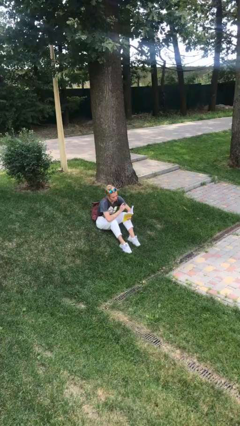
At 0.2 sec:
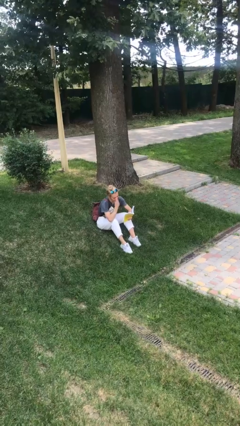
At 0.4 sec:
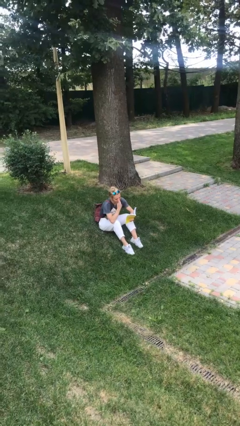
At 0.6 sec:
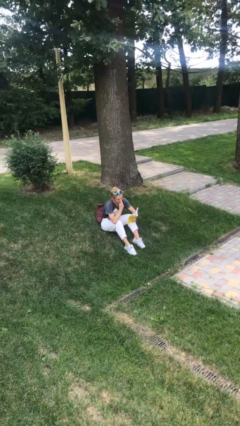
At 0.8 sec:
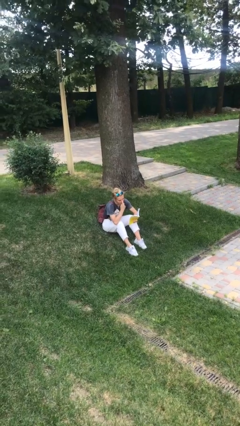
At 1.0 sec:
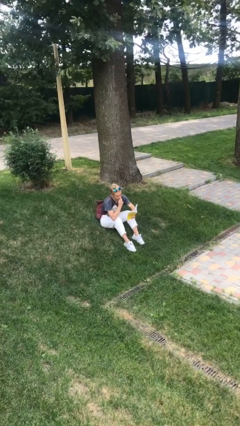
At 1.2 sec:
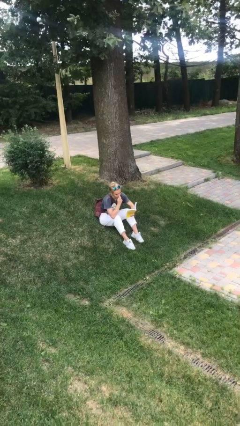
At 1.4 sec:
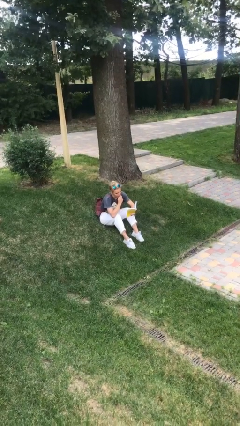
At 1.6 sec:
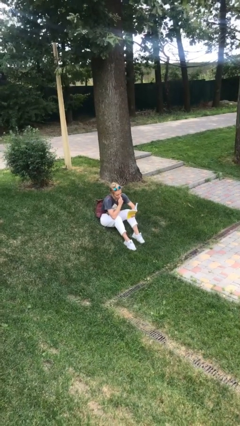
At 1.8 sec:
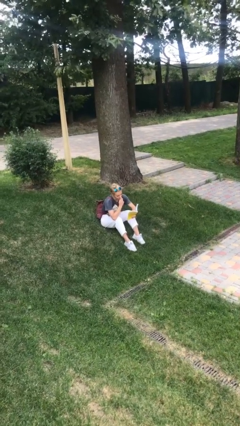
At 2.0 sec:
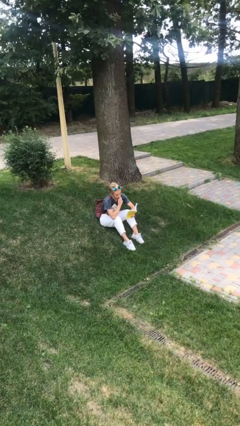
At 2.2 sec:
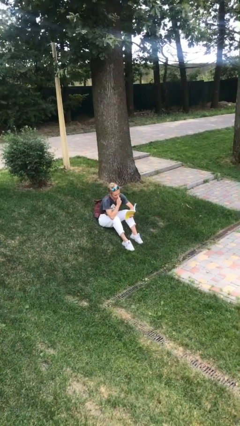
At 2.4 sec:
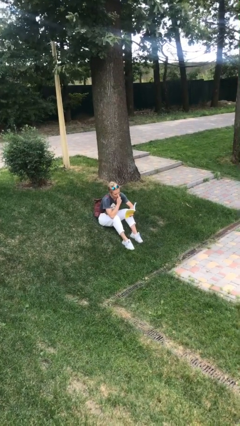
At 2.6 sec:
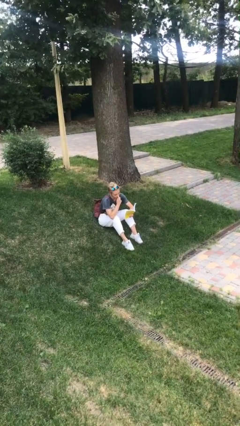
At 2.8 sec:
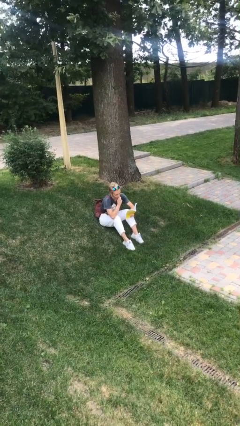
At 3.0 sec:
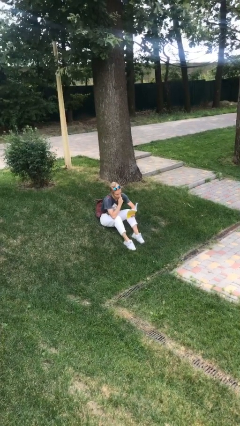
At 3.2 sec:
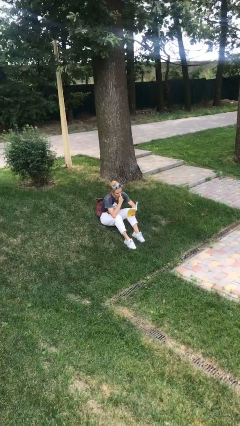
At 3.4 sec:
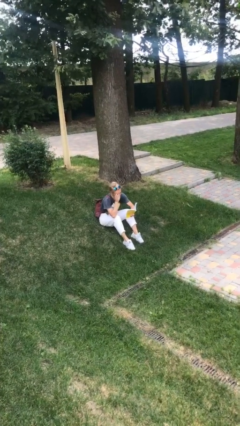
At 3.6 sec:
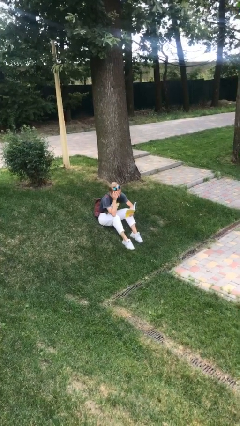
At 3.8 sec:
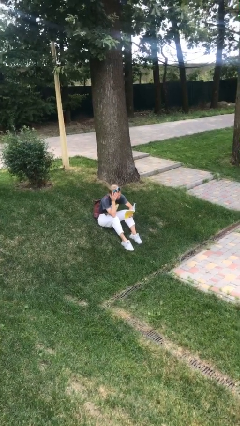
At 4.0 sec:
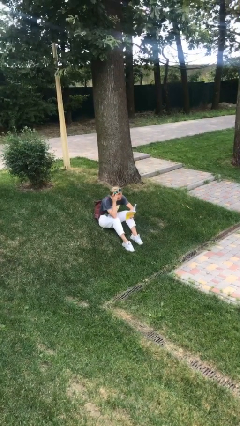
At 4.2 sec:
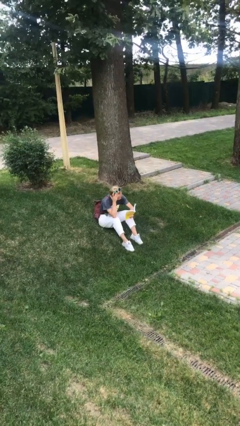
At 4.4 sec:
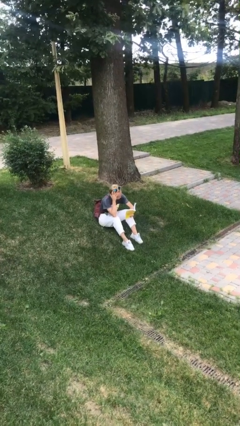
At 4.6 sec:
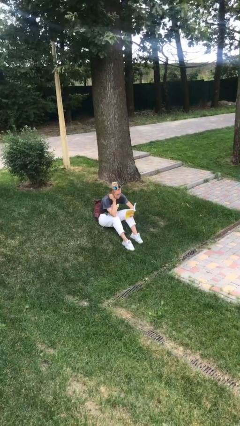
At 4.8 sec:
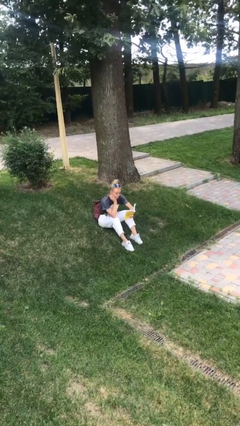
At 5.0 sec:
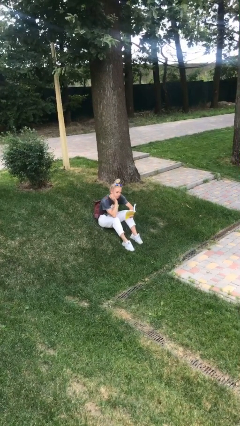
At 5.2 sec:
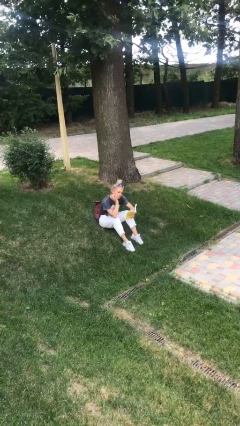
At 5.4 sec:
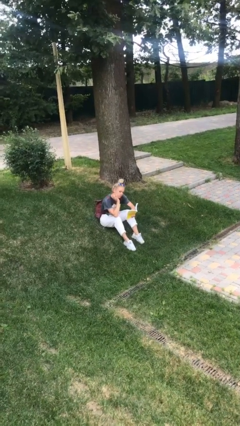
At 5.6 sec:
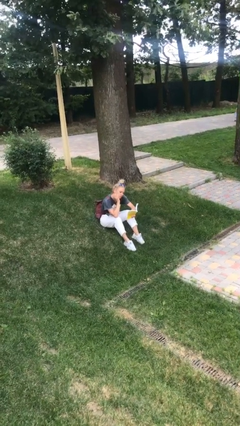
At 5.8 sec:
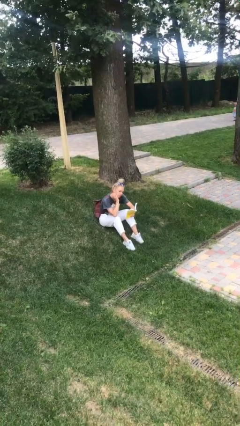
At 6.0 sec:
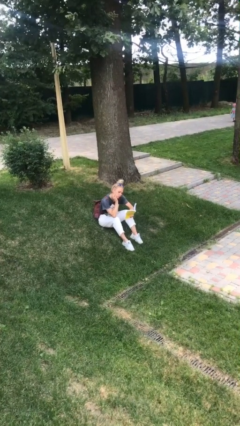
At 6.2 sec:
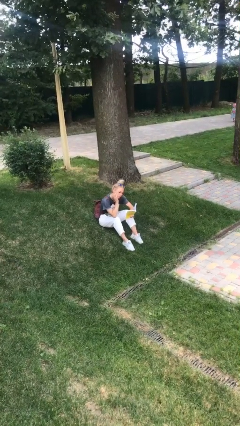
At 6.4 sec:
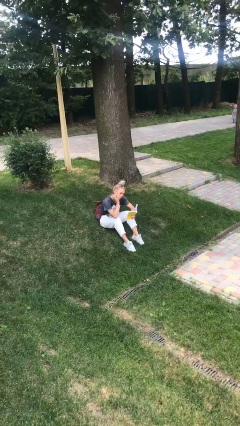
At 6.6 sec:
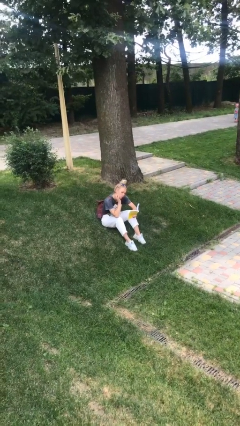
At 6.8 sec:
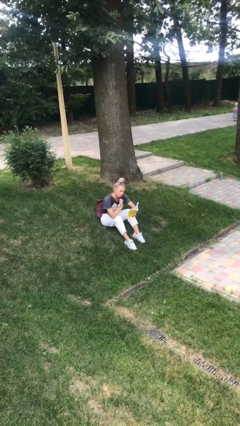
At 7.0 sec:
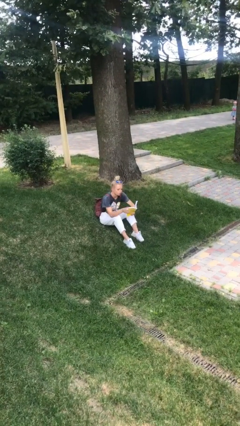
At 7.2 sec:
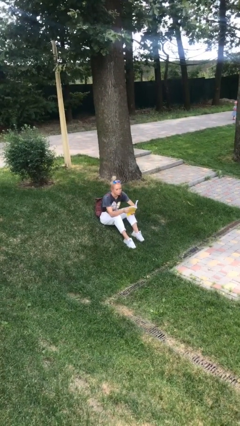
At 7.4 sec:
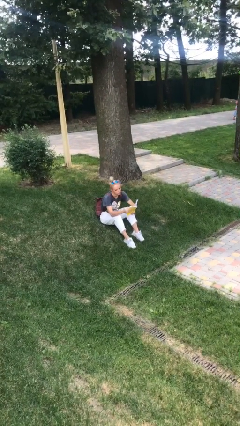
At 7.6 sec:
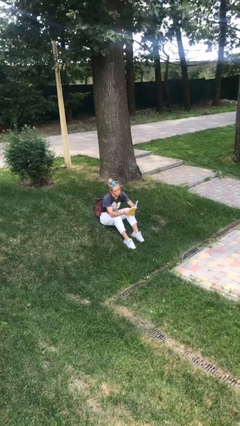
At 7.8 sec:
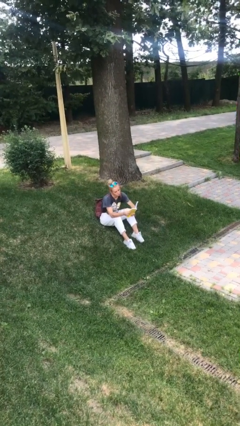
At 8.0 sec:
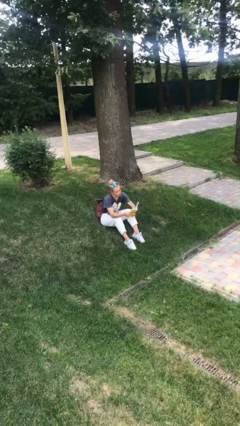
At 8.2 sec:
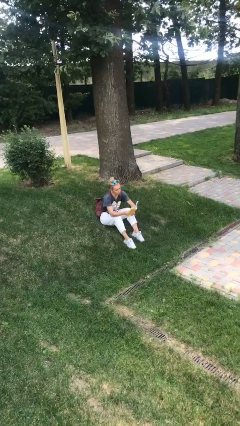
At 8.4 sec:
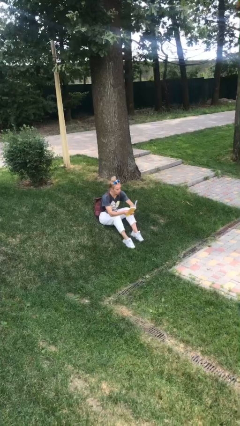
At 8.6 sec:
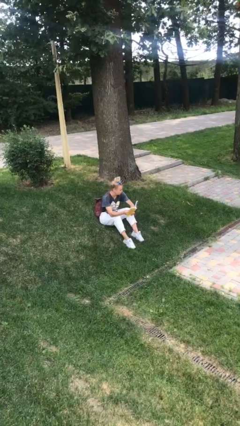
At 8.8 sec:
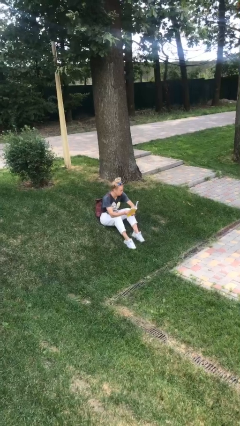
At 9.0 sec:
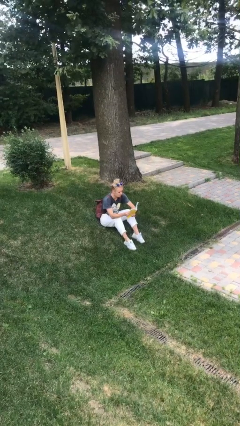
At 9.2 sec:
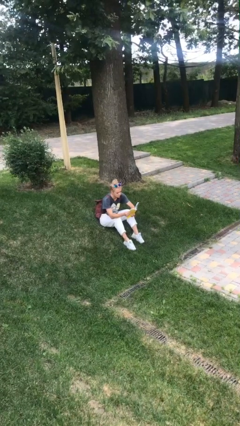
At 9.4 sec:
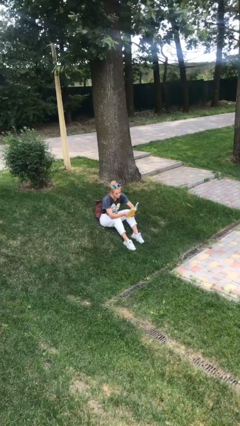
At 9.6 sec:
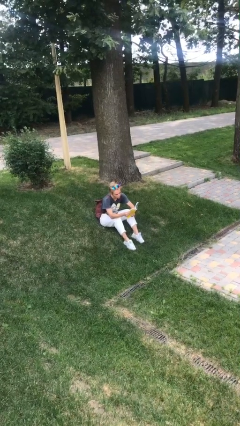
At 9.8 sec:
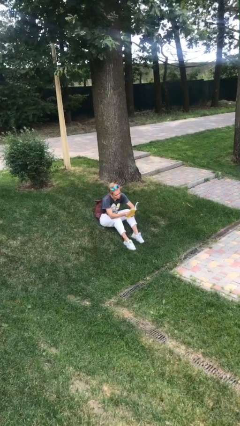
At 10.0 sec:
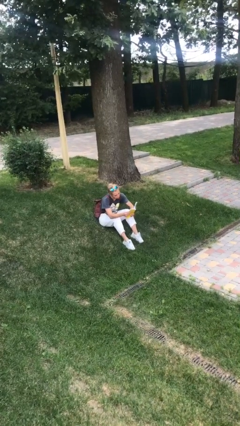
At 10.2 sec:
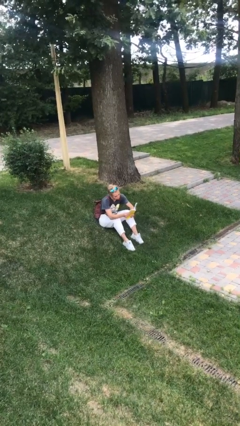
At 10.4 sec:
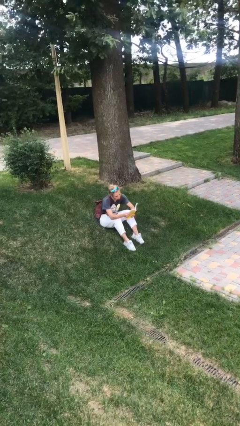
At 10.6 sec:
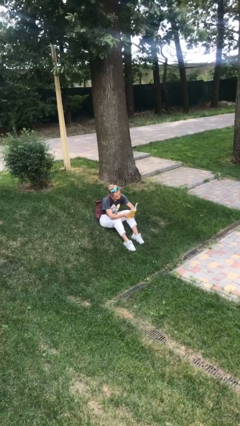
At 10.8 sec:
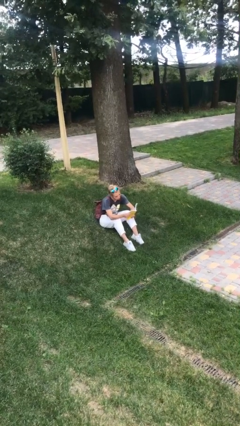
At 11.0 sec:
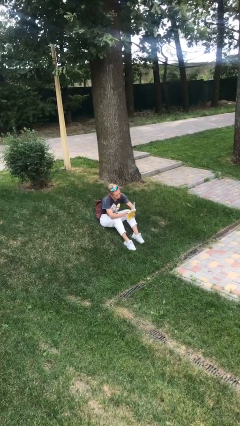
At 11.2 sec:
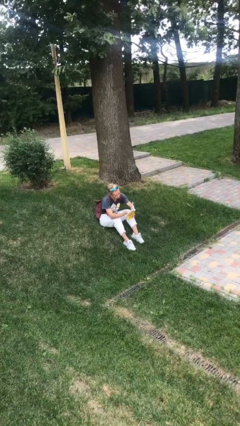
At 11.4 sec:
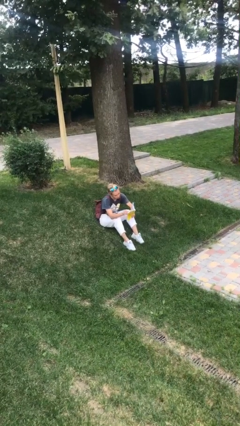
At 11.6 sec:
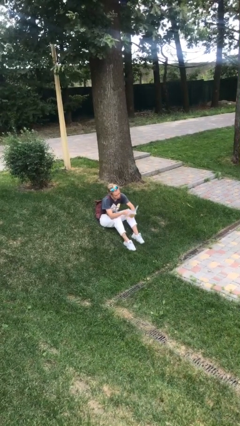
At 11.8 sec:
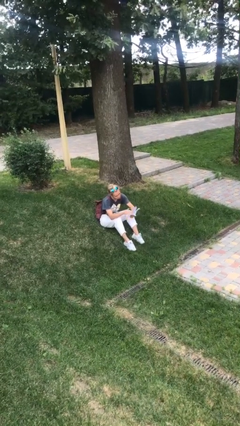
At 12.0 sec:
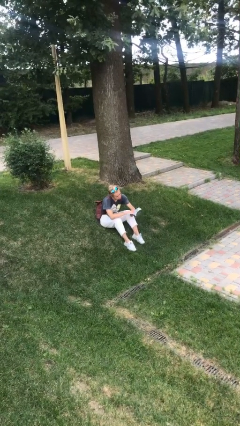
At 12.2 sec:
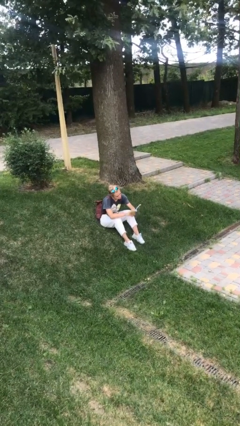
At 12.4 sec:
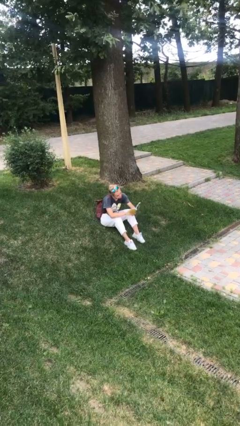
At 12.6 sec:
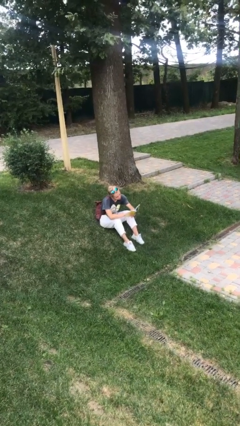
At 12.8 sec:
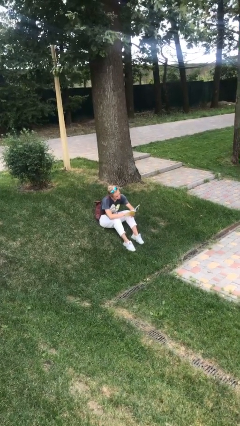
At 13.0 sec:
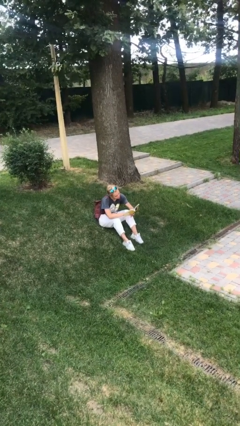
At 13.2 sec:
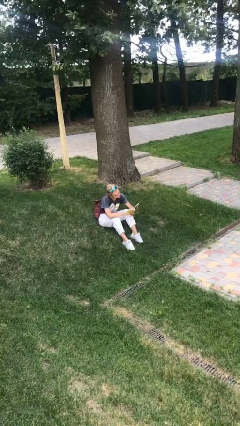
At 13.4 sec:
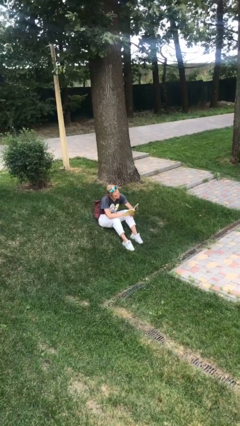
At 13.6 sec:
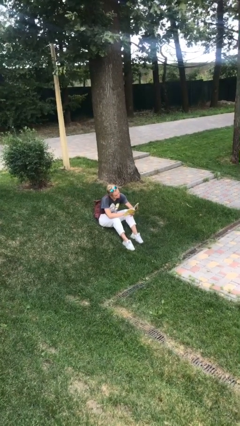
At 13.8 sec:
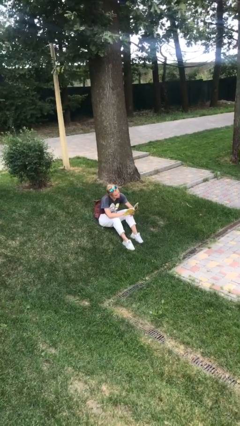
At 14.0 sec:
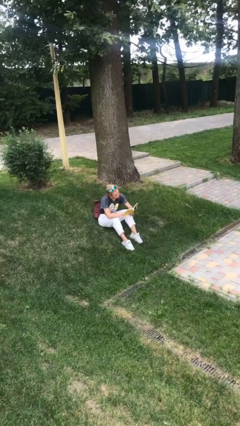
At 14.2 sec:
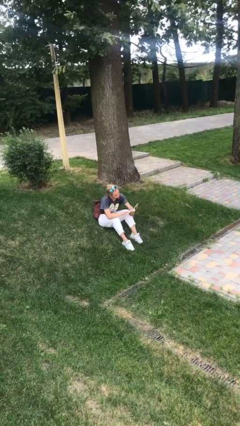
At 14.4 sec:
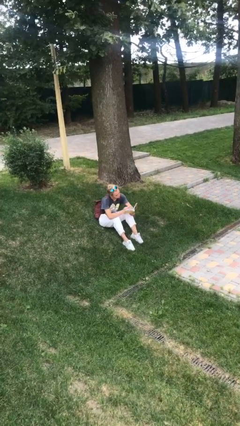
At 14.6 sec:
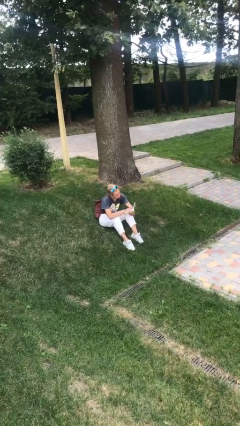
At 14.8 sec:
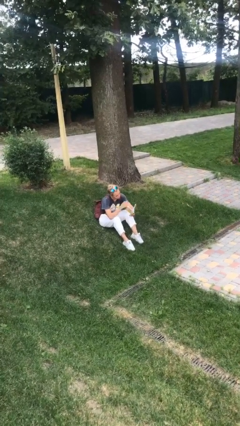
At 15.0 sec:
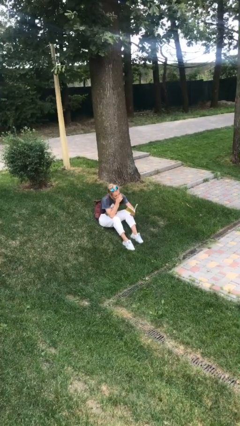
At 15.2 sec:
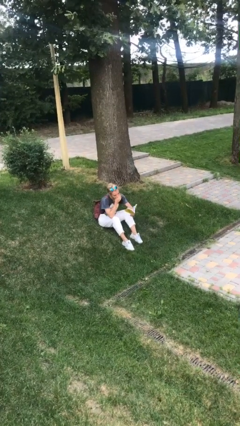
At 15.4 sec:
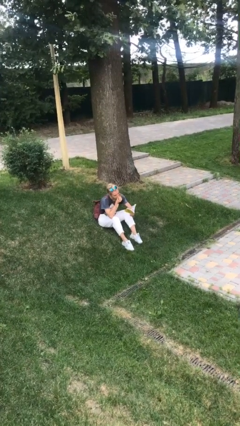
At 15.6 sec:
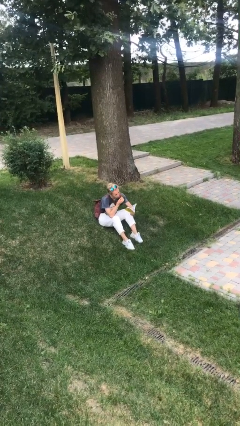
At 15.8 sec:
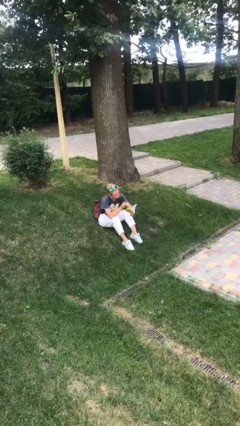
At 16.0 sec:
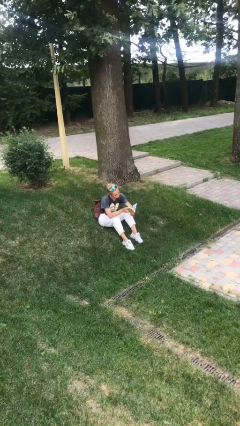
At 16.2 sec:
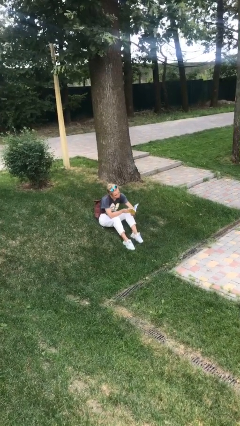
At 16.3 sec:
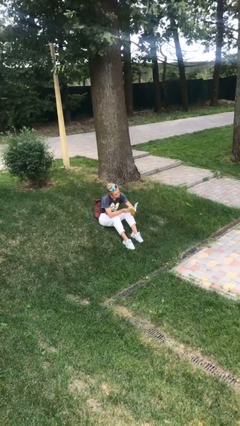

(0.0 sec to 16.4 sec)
person reads document

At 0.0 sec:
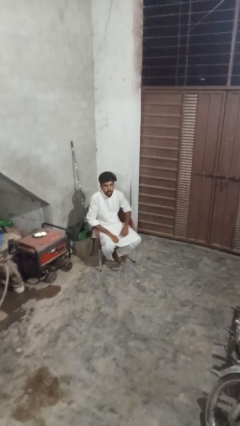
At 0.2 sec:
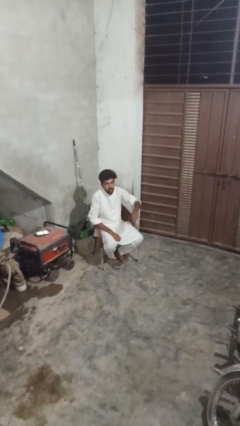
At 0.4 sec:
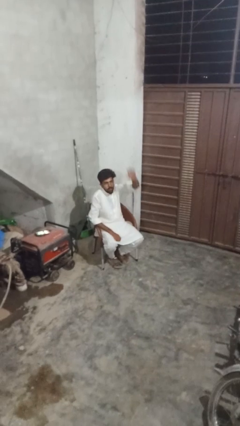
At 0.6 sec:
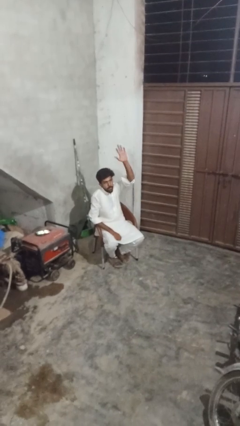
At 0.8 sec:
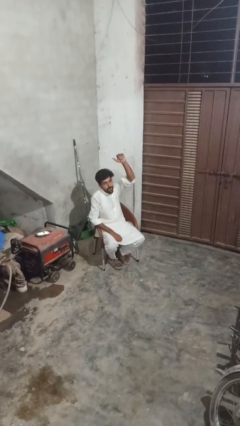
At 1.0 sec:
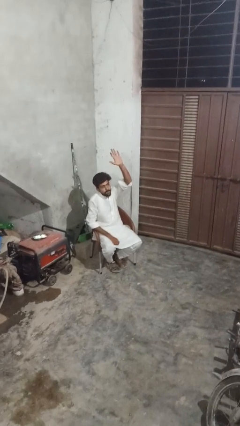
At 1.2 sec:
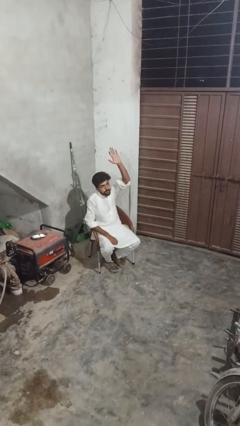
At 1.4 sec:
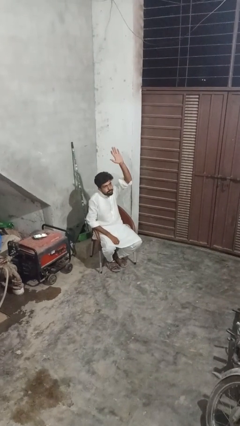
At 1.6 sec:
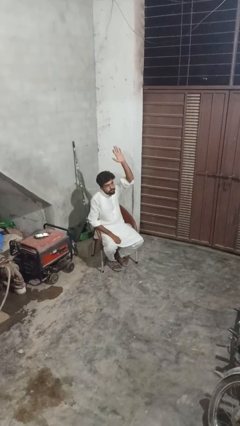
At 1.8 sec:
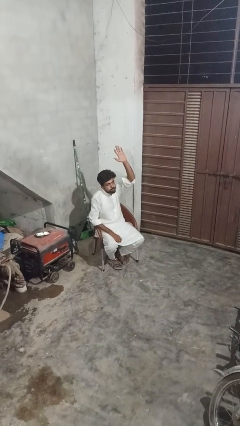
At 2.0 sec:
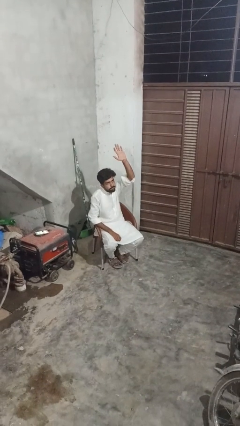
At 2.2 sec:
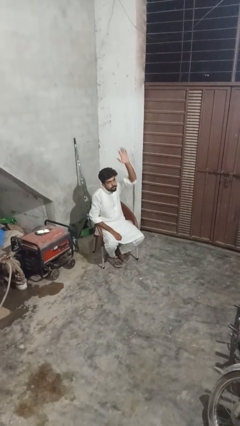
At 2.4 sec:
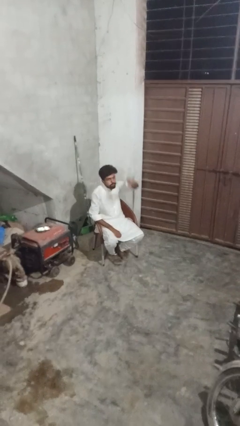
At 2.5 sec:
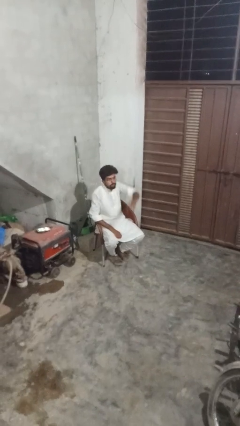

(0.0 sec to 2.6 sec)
person gestures raise hand
